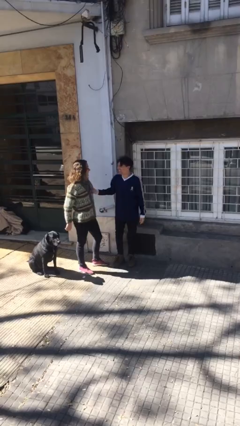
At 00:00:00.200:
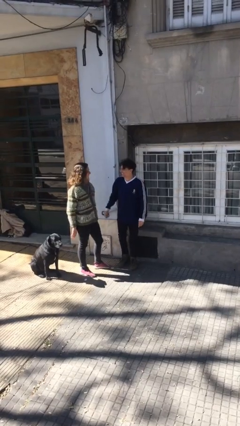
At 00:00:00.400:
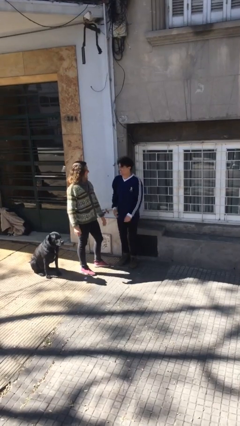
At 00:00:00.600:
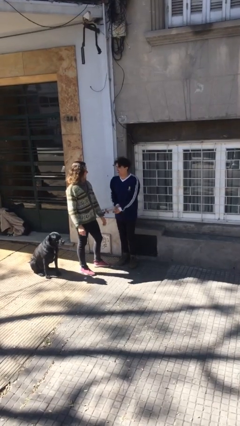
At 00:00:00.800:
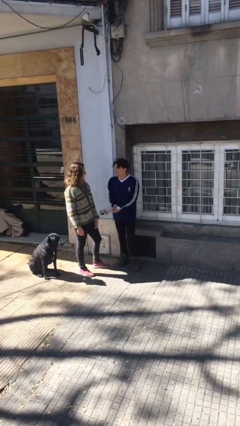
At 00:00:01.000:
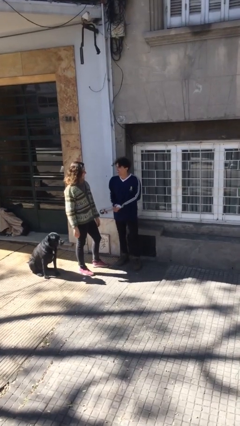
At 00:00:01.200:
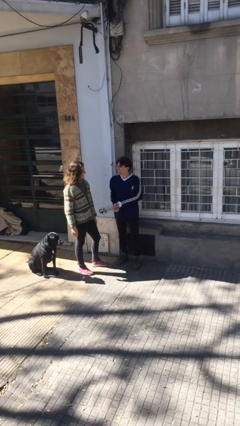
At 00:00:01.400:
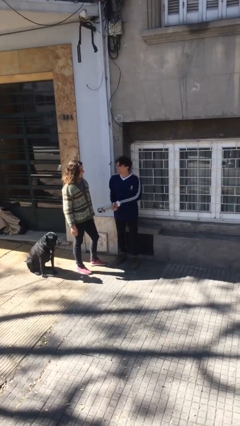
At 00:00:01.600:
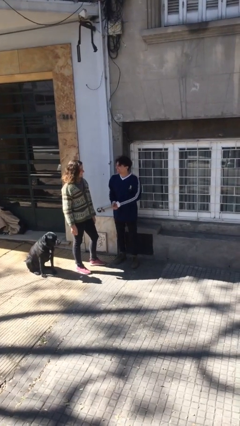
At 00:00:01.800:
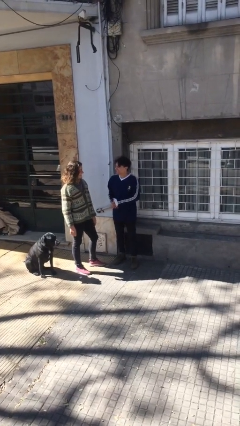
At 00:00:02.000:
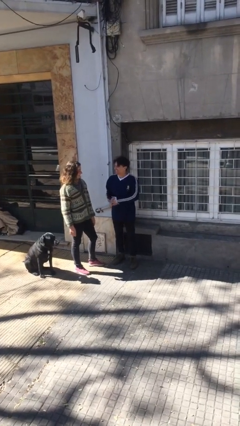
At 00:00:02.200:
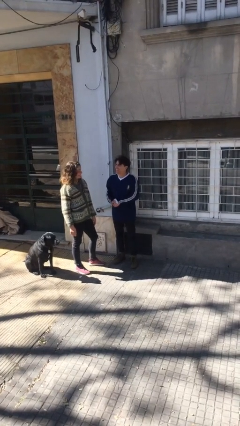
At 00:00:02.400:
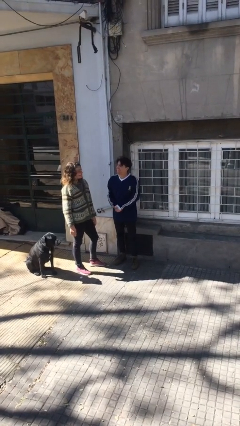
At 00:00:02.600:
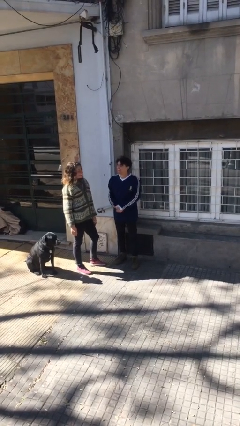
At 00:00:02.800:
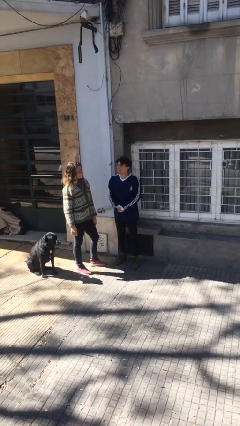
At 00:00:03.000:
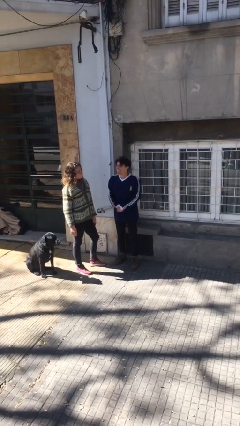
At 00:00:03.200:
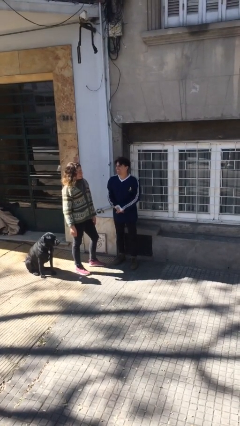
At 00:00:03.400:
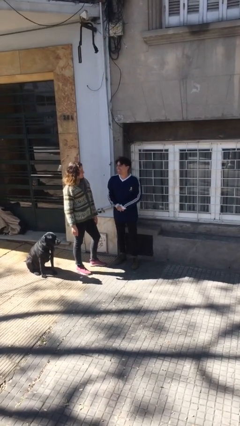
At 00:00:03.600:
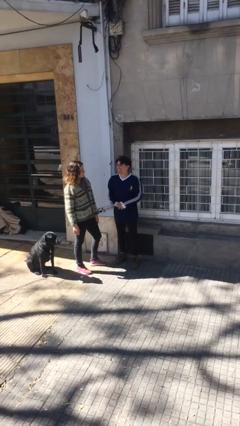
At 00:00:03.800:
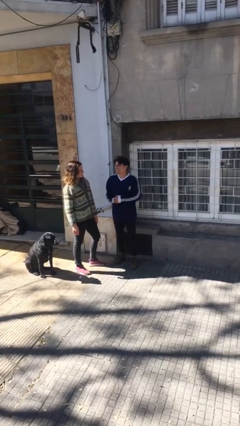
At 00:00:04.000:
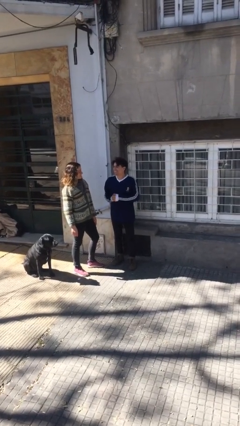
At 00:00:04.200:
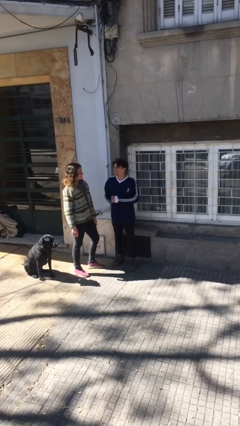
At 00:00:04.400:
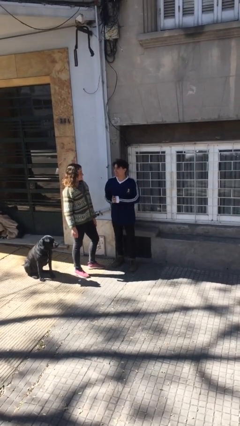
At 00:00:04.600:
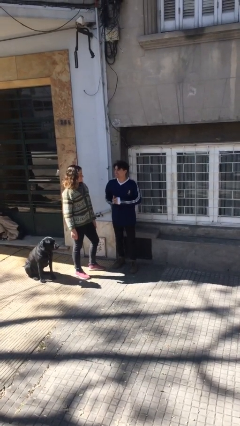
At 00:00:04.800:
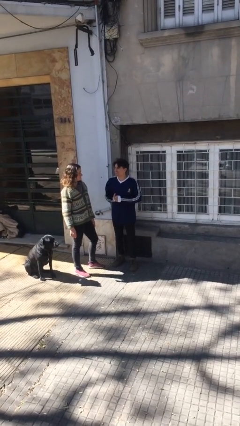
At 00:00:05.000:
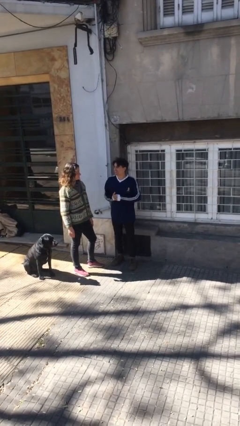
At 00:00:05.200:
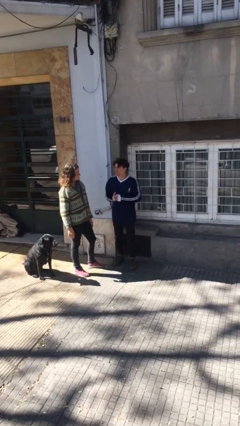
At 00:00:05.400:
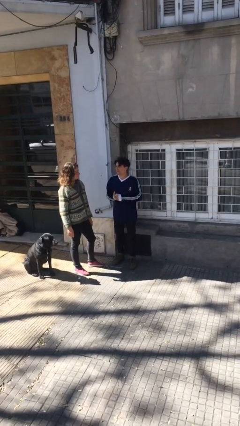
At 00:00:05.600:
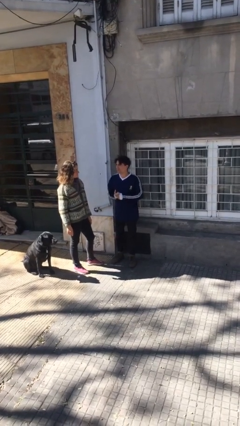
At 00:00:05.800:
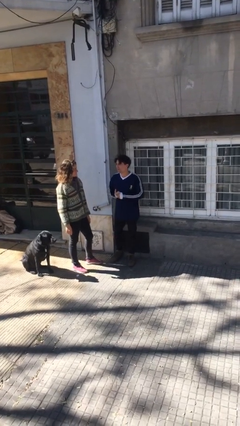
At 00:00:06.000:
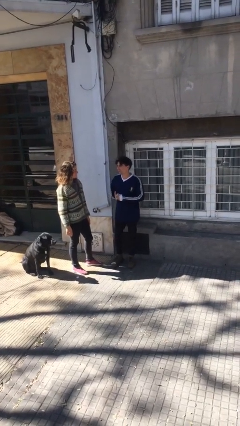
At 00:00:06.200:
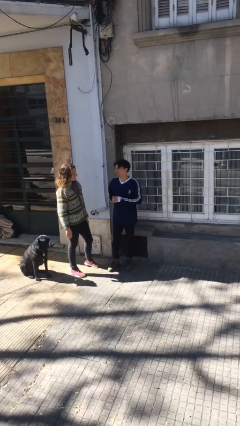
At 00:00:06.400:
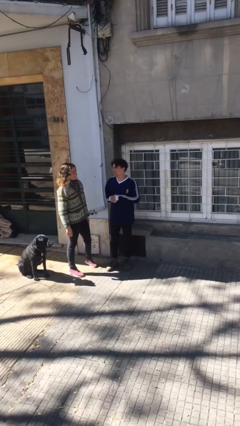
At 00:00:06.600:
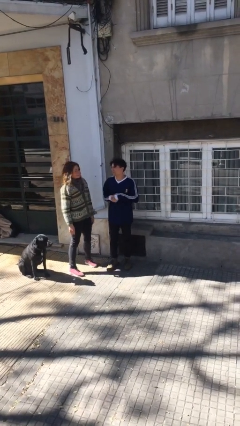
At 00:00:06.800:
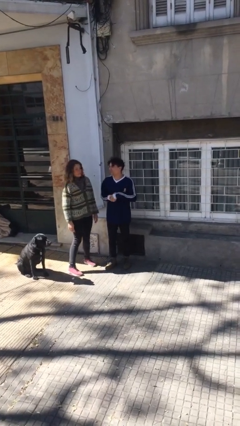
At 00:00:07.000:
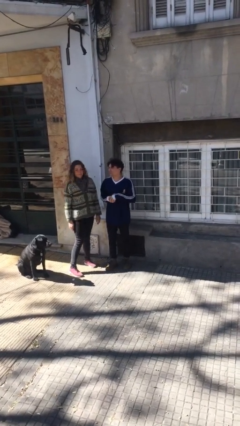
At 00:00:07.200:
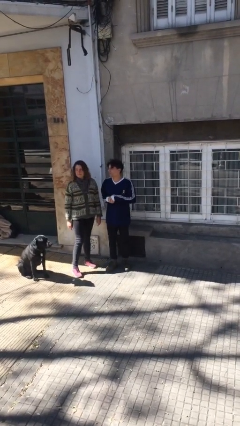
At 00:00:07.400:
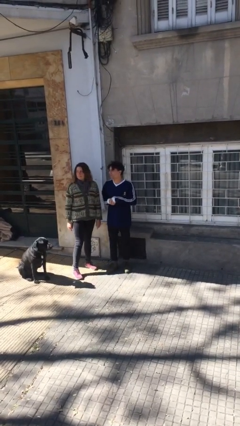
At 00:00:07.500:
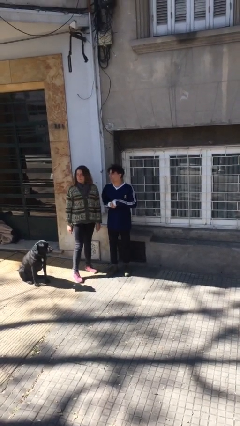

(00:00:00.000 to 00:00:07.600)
person talks to person

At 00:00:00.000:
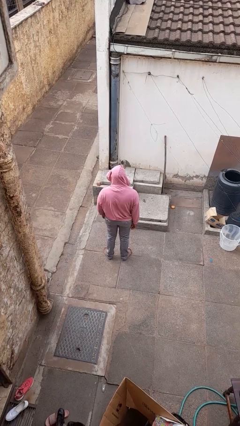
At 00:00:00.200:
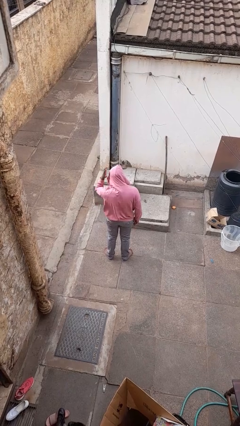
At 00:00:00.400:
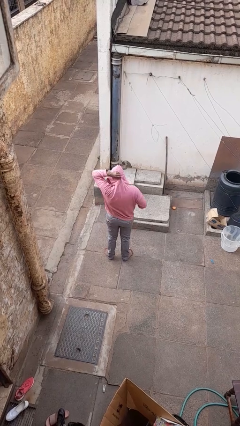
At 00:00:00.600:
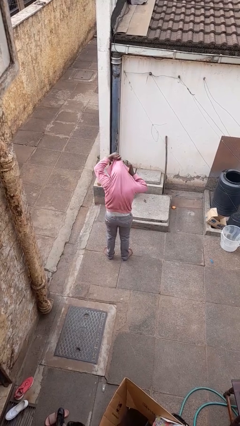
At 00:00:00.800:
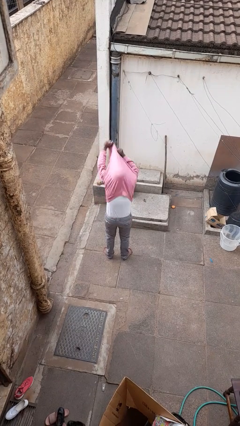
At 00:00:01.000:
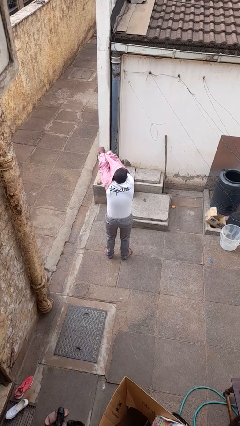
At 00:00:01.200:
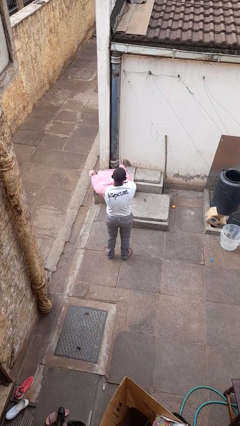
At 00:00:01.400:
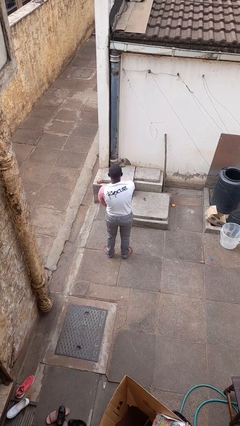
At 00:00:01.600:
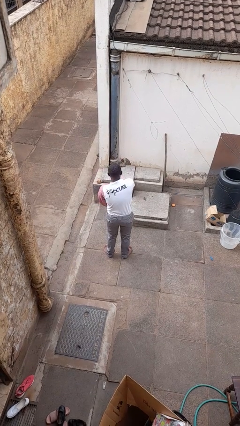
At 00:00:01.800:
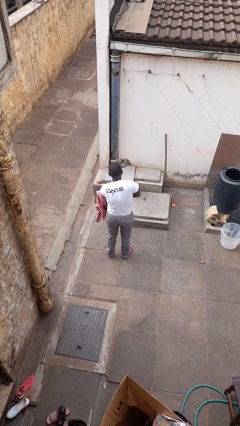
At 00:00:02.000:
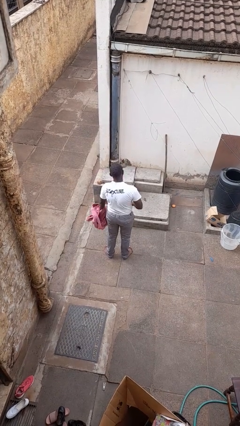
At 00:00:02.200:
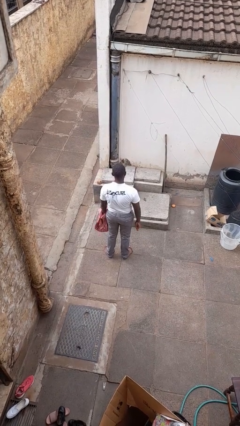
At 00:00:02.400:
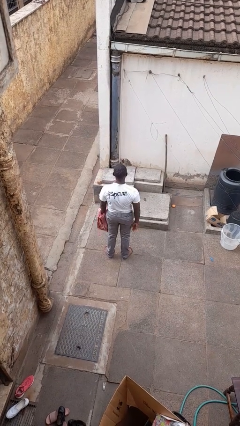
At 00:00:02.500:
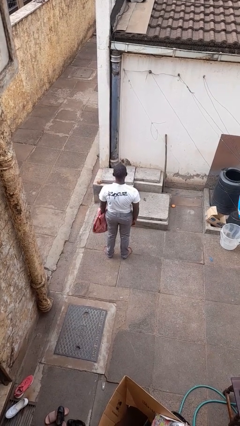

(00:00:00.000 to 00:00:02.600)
person takes off hoodie

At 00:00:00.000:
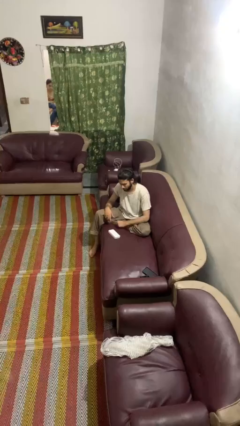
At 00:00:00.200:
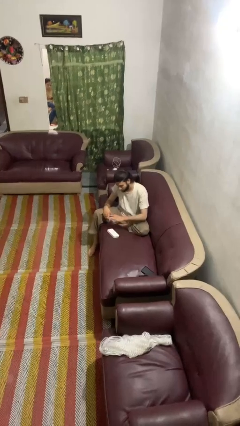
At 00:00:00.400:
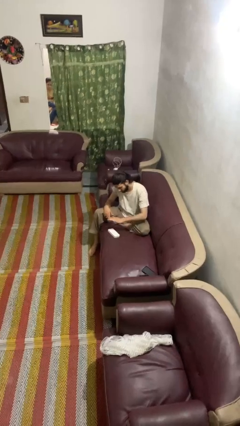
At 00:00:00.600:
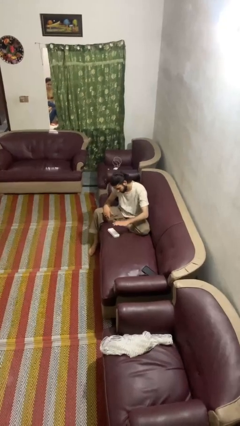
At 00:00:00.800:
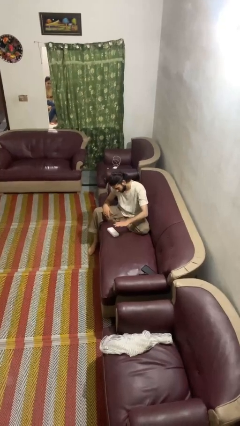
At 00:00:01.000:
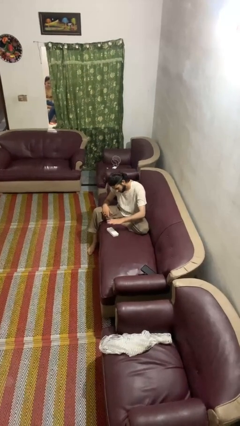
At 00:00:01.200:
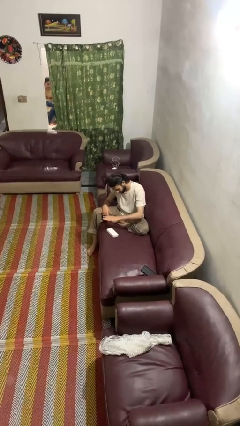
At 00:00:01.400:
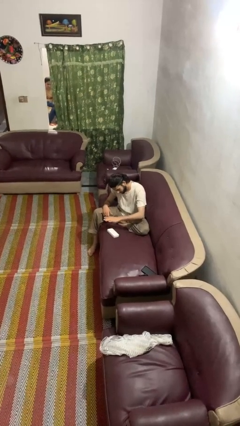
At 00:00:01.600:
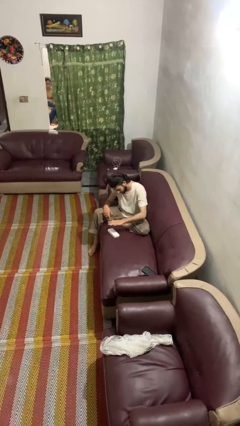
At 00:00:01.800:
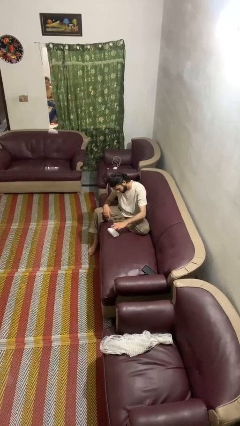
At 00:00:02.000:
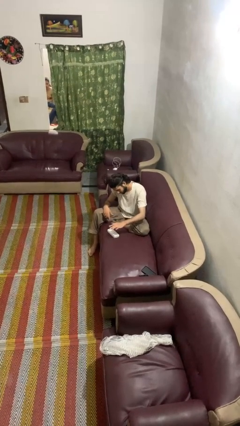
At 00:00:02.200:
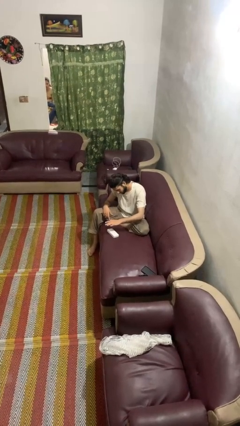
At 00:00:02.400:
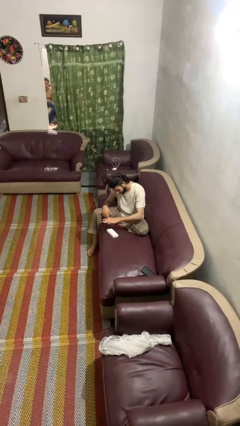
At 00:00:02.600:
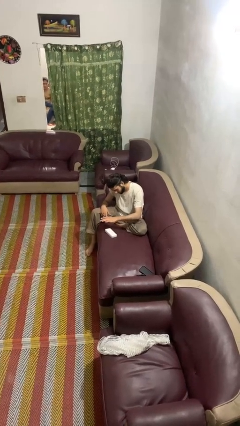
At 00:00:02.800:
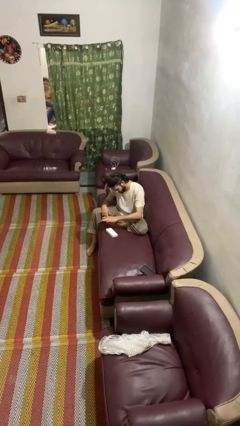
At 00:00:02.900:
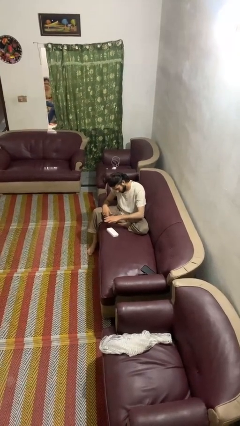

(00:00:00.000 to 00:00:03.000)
person waves hand over object

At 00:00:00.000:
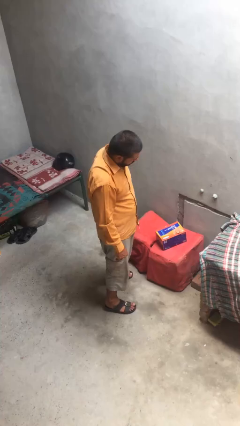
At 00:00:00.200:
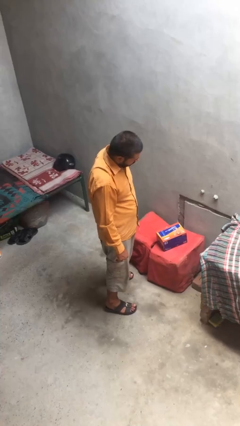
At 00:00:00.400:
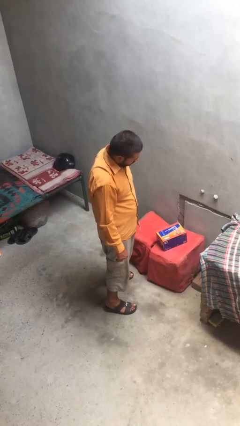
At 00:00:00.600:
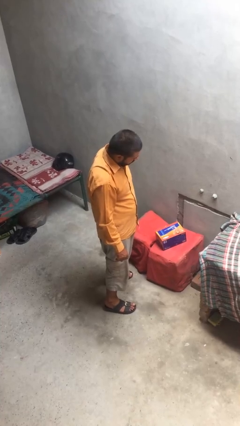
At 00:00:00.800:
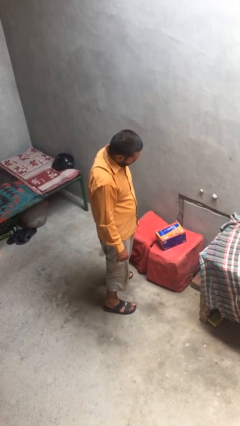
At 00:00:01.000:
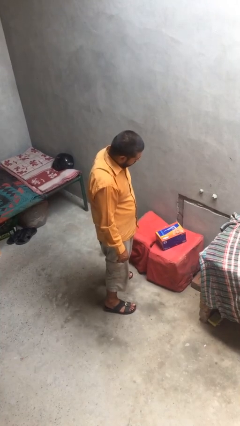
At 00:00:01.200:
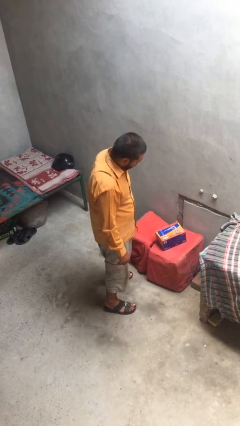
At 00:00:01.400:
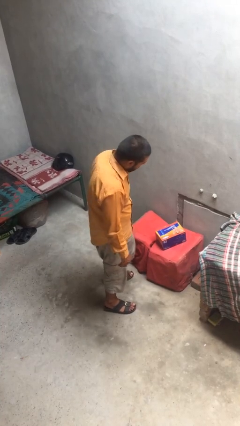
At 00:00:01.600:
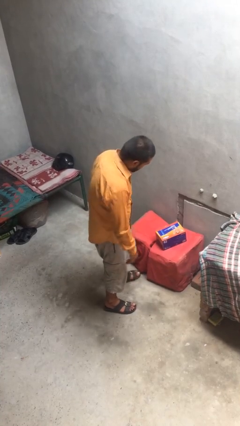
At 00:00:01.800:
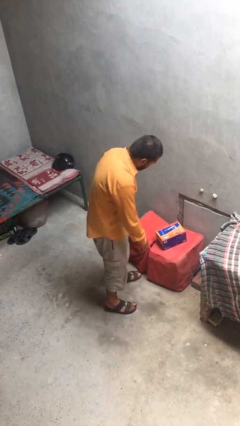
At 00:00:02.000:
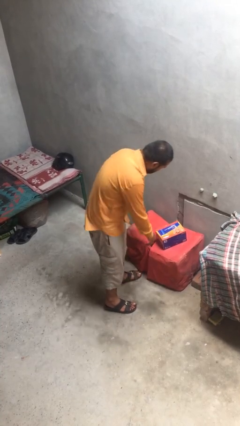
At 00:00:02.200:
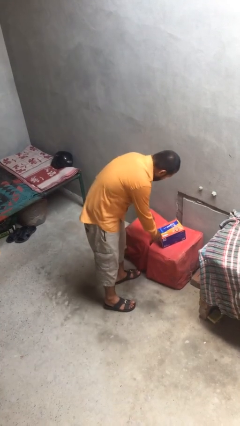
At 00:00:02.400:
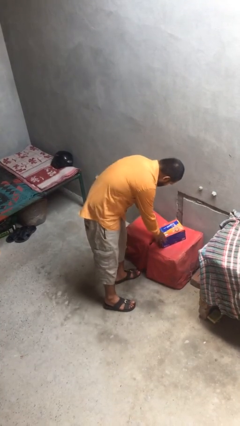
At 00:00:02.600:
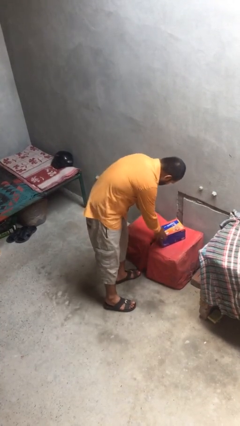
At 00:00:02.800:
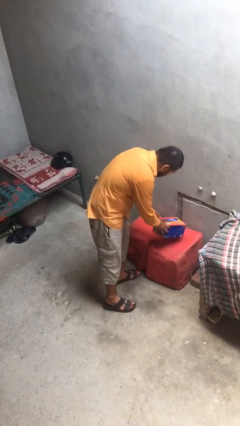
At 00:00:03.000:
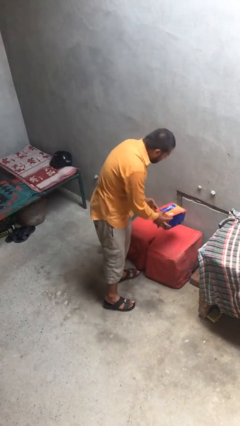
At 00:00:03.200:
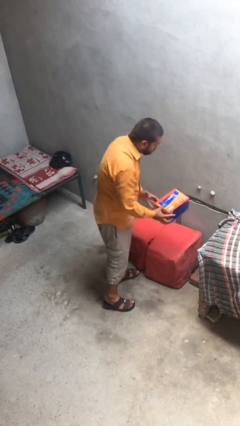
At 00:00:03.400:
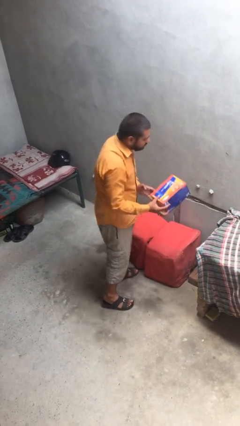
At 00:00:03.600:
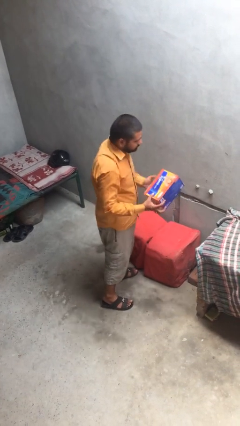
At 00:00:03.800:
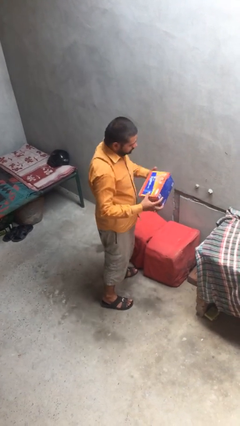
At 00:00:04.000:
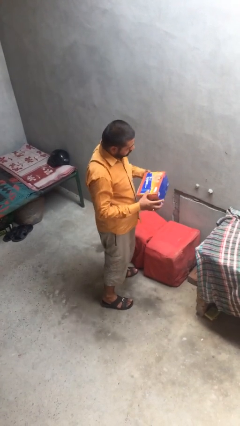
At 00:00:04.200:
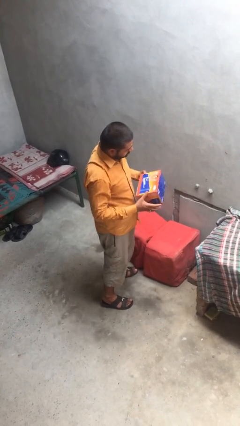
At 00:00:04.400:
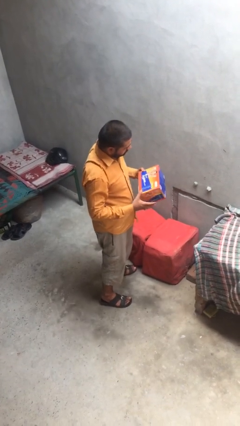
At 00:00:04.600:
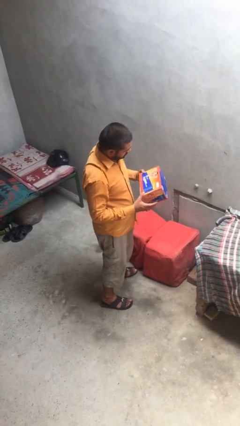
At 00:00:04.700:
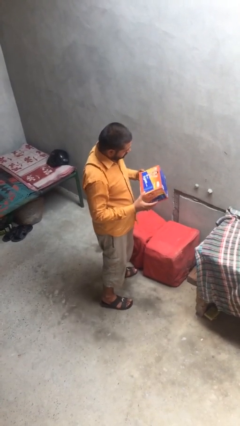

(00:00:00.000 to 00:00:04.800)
person picks up object from table
